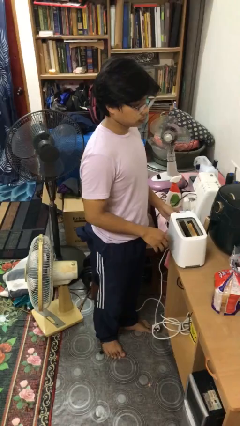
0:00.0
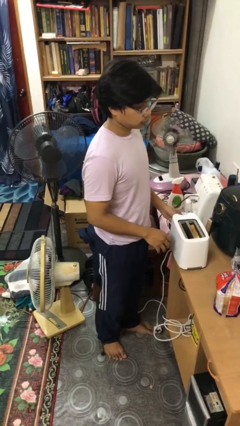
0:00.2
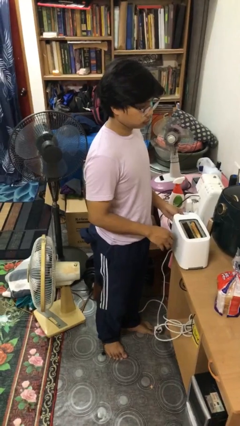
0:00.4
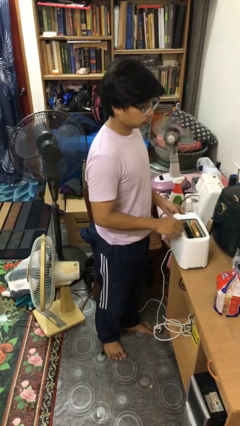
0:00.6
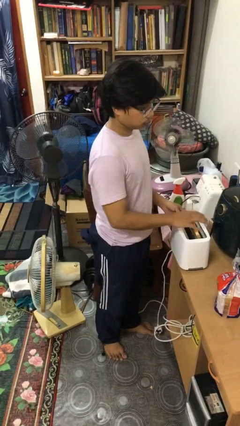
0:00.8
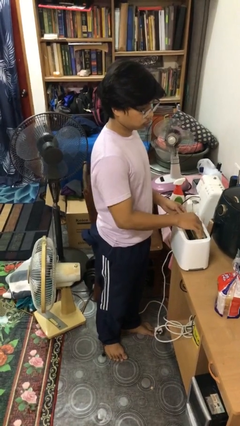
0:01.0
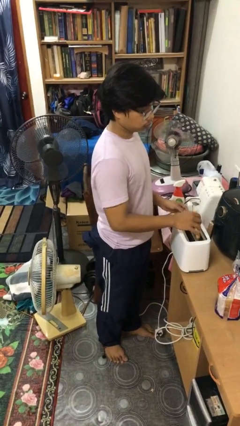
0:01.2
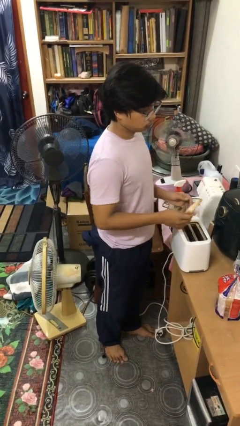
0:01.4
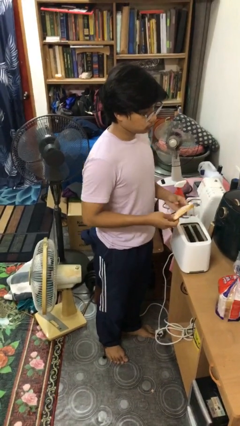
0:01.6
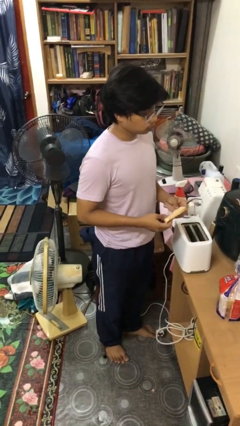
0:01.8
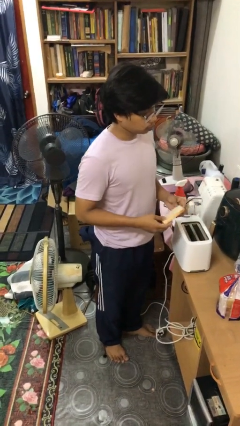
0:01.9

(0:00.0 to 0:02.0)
person takes object from toaster

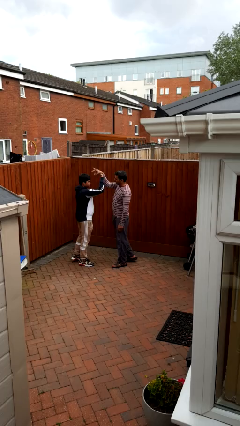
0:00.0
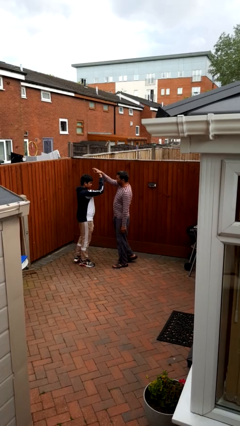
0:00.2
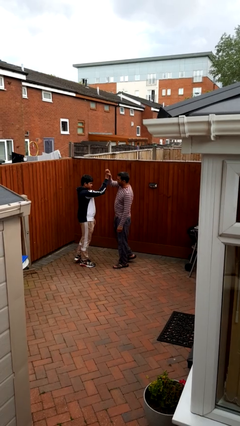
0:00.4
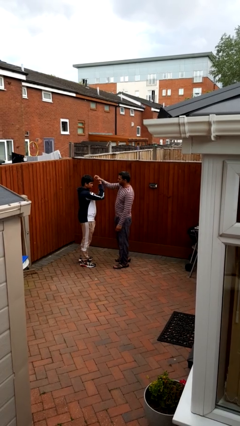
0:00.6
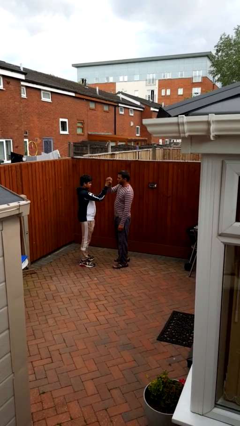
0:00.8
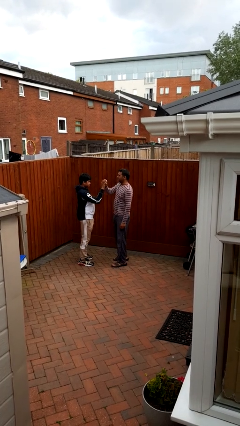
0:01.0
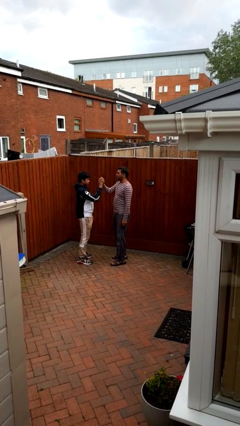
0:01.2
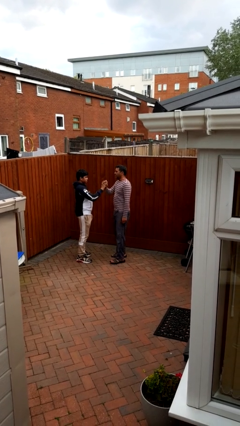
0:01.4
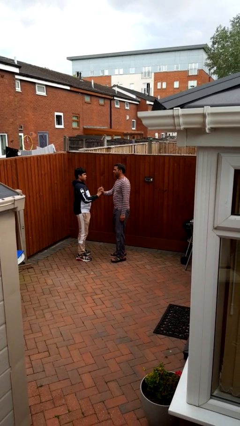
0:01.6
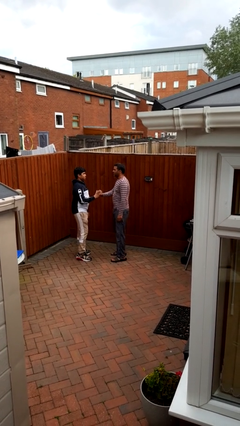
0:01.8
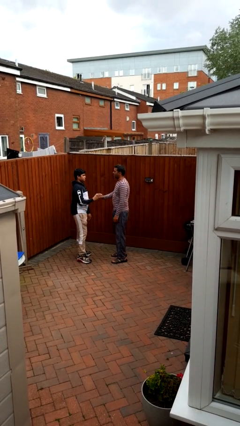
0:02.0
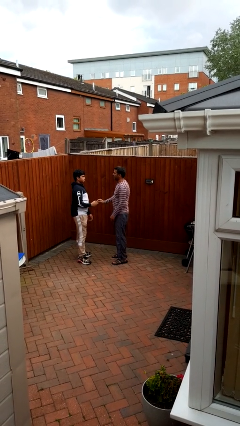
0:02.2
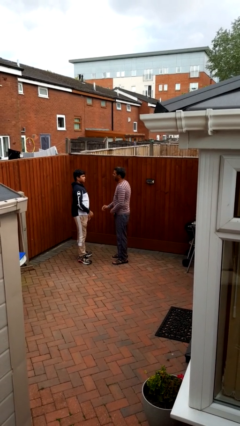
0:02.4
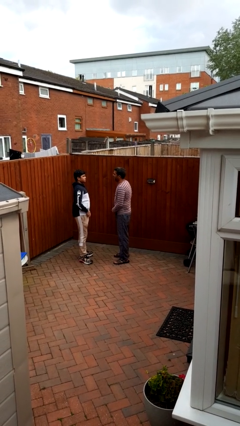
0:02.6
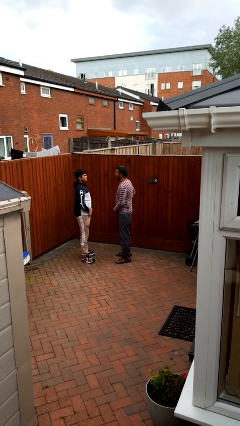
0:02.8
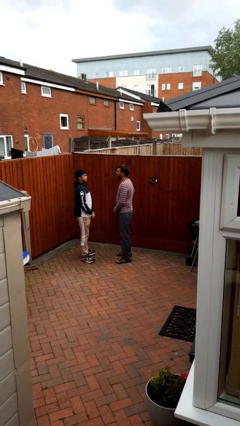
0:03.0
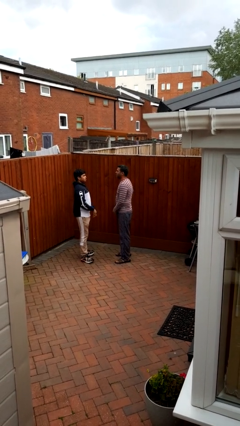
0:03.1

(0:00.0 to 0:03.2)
person highfives hand

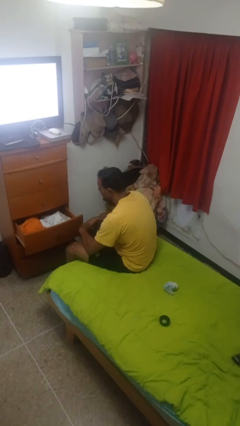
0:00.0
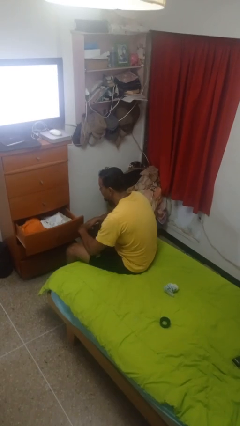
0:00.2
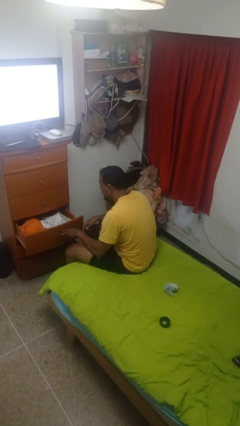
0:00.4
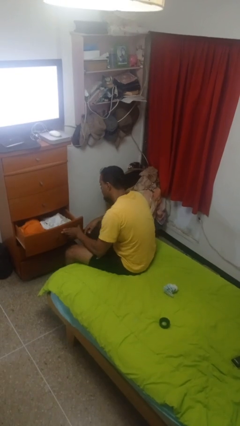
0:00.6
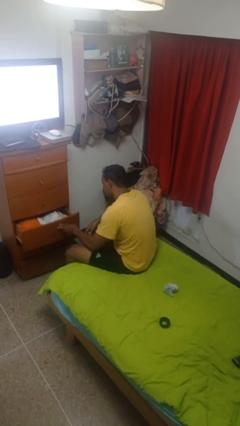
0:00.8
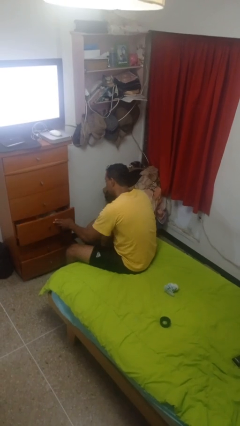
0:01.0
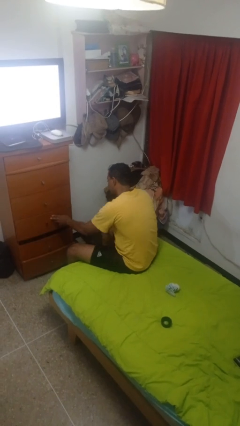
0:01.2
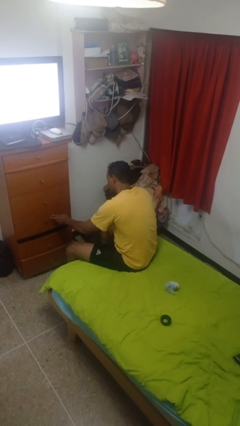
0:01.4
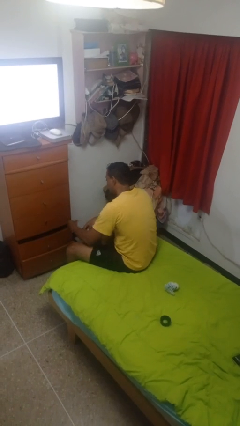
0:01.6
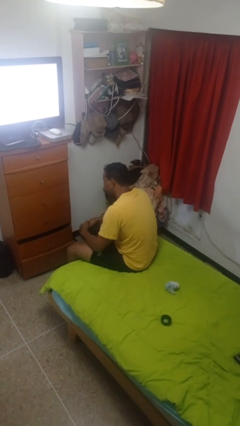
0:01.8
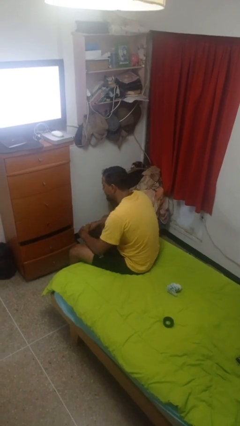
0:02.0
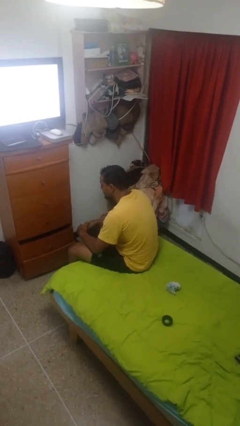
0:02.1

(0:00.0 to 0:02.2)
person closes dresser drawer

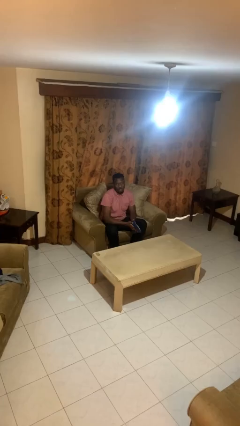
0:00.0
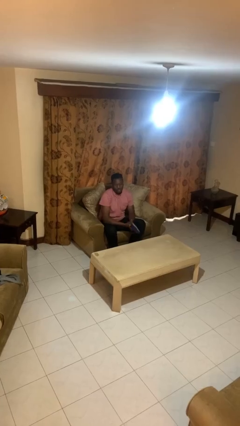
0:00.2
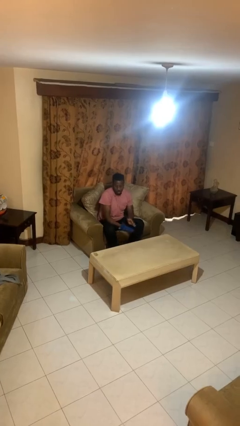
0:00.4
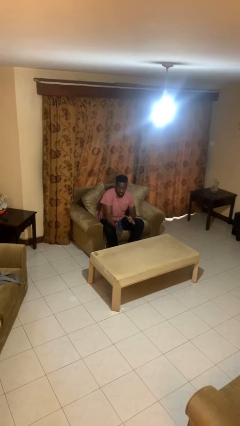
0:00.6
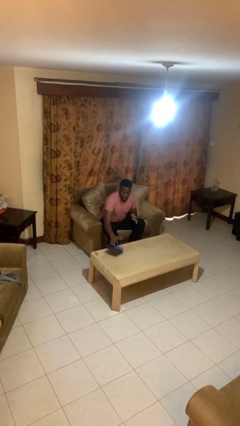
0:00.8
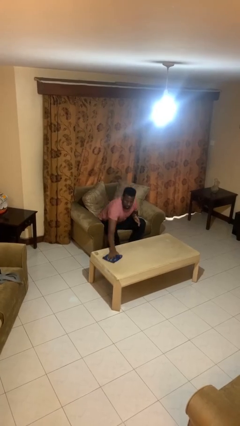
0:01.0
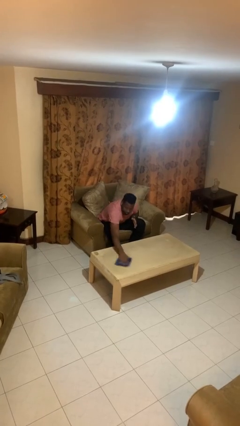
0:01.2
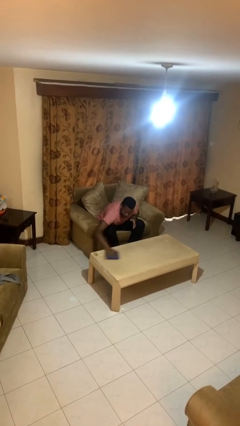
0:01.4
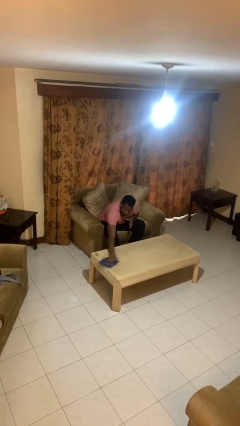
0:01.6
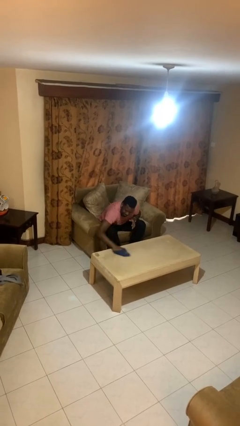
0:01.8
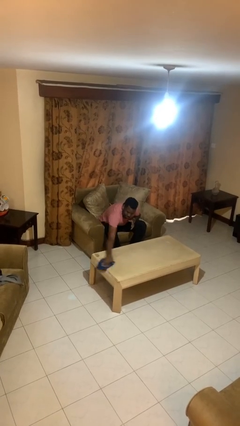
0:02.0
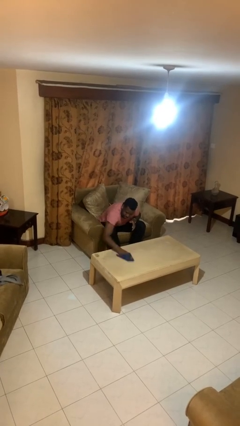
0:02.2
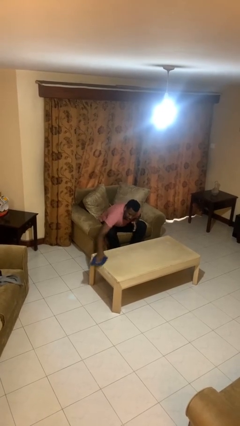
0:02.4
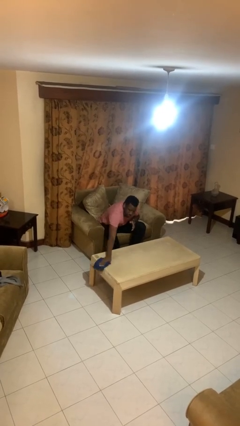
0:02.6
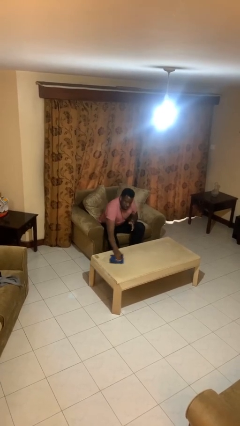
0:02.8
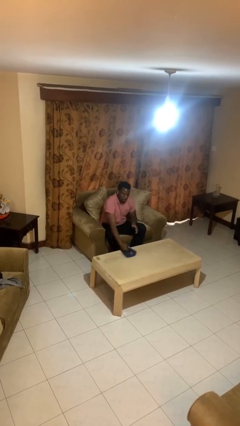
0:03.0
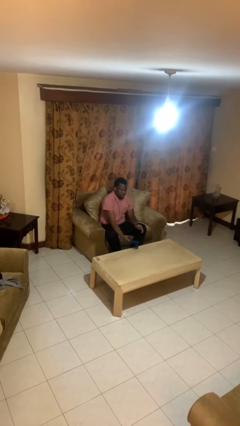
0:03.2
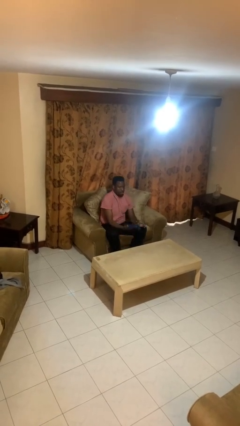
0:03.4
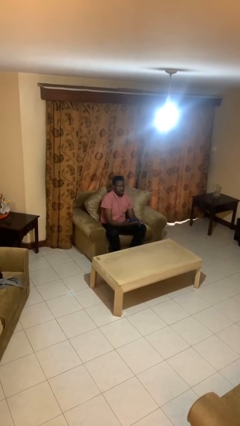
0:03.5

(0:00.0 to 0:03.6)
person cleans table with rag

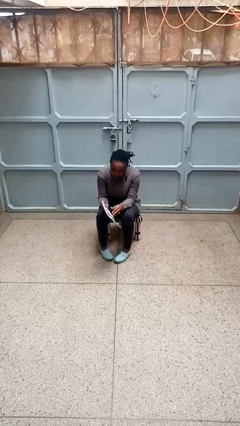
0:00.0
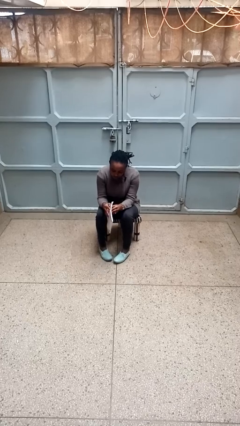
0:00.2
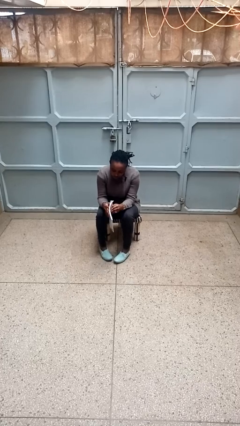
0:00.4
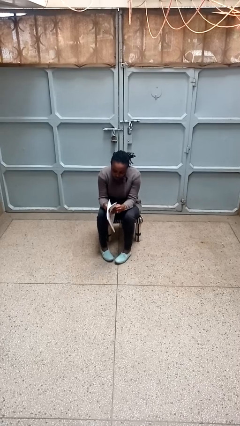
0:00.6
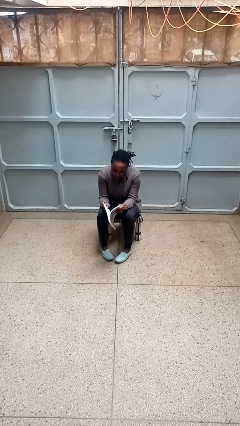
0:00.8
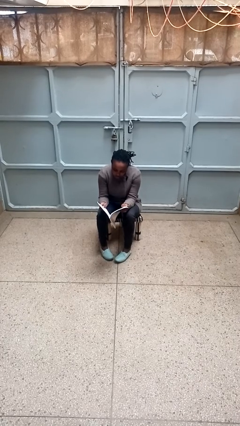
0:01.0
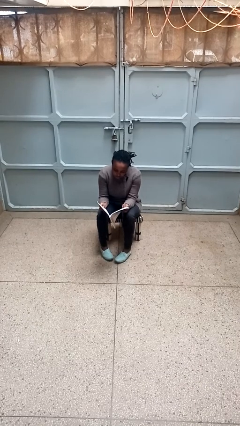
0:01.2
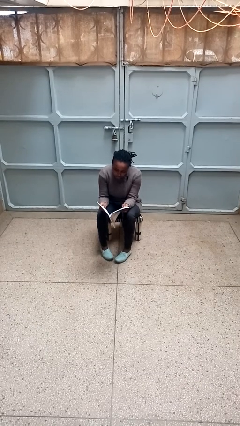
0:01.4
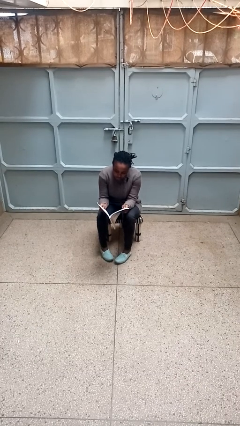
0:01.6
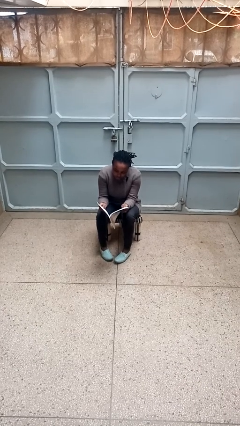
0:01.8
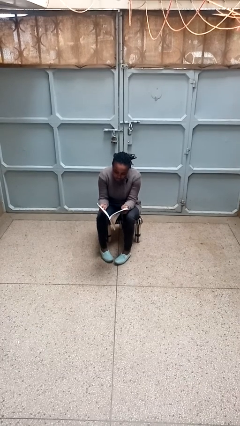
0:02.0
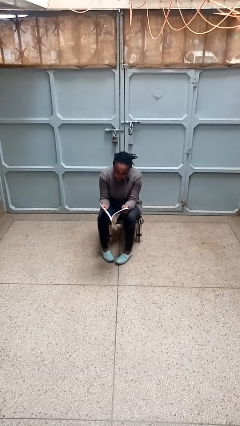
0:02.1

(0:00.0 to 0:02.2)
person reads magazine

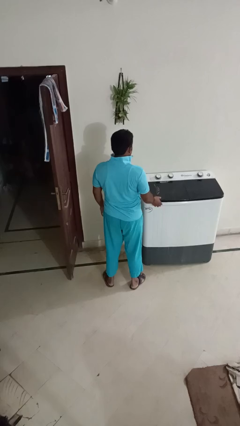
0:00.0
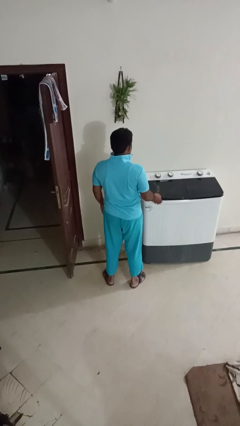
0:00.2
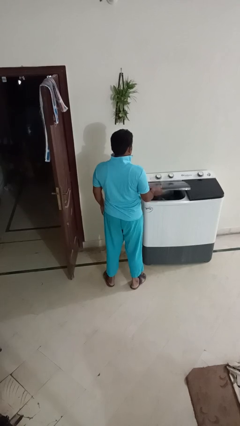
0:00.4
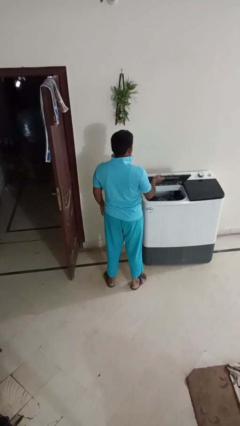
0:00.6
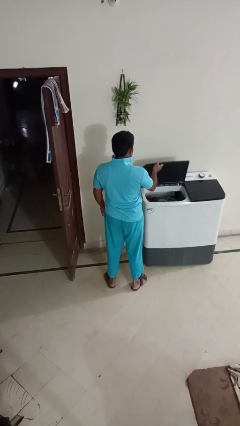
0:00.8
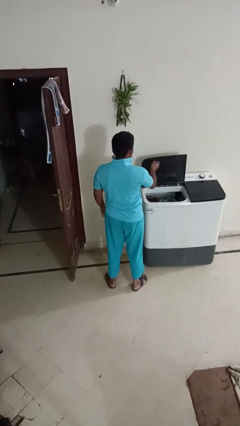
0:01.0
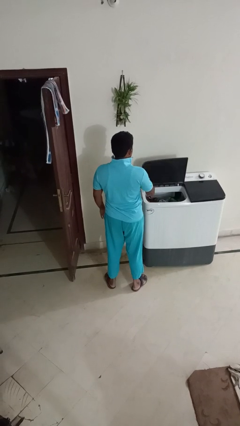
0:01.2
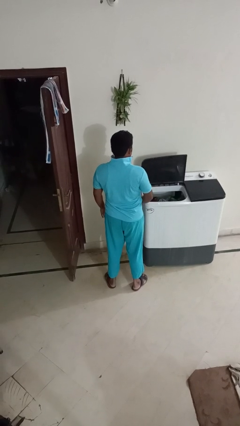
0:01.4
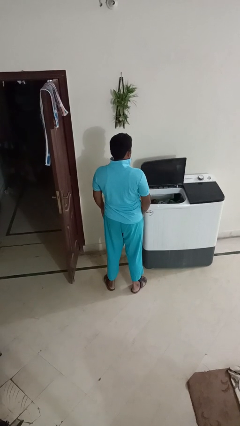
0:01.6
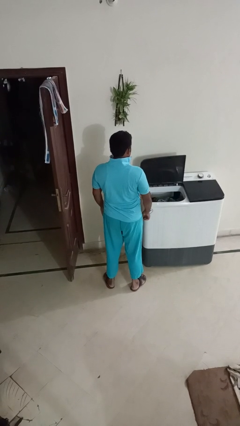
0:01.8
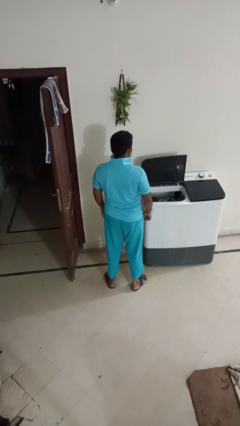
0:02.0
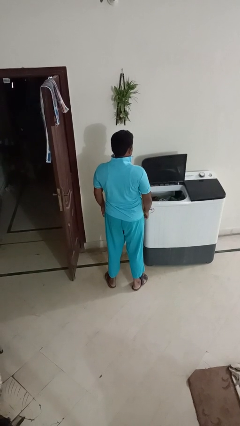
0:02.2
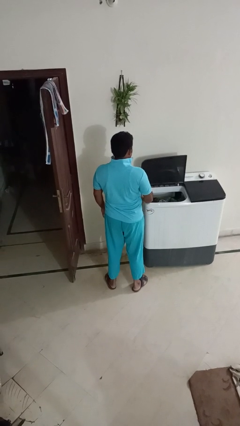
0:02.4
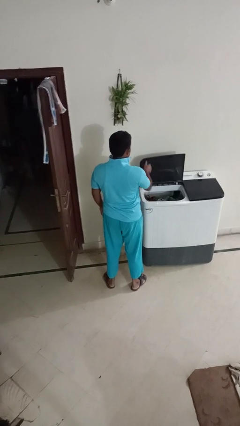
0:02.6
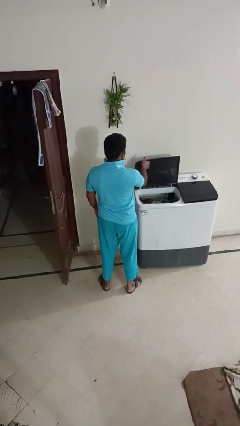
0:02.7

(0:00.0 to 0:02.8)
person opens clothes washer

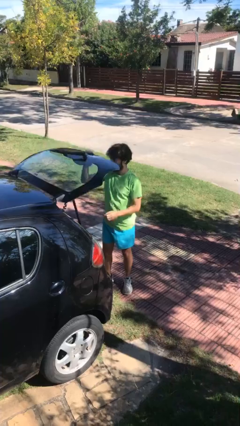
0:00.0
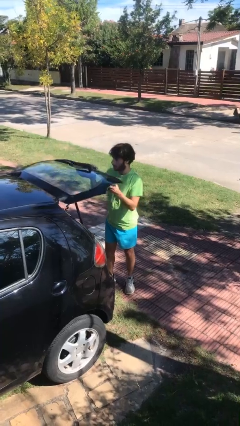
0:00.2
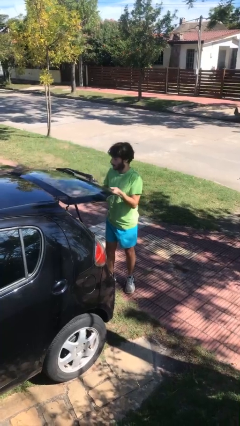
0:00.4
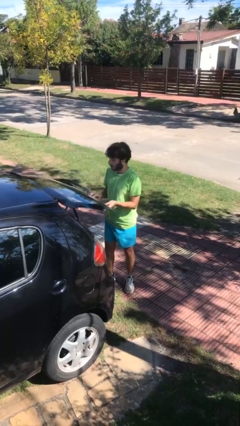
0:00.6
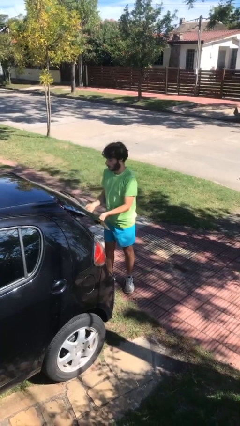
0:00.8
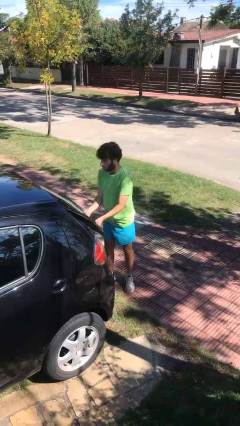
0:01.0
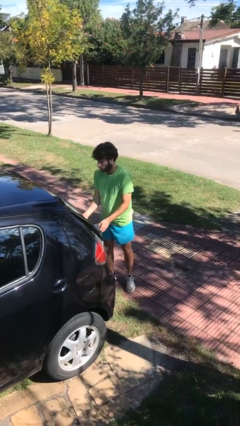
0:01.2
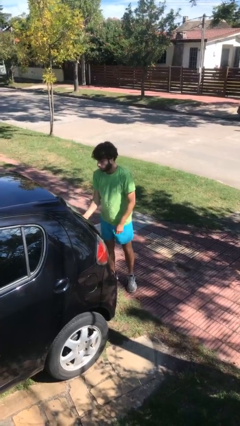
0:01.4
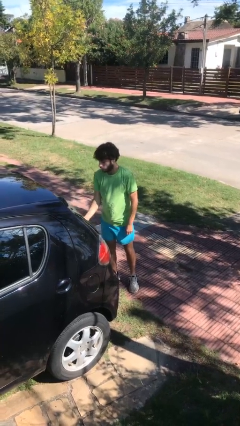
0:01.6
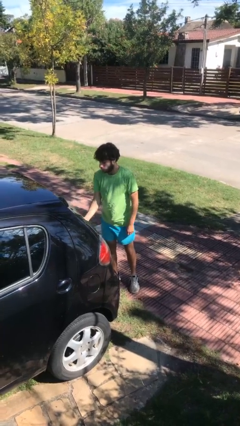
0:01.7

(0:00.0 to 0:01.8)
person closes car trunk
